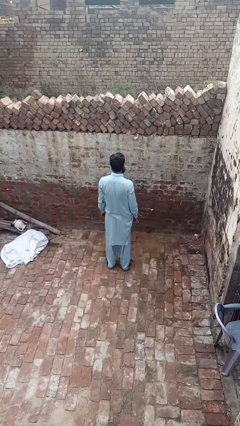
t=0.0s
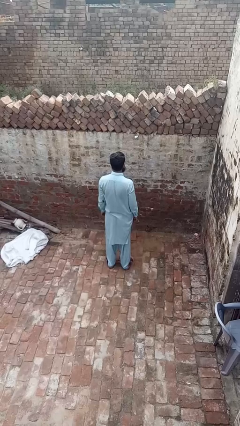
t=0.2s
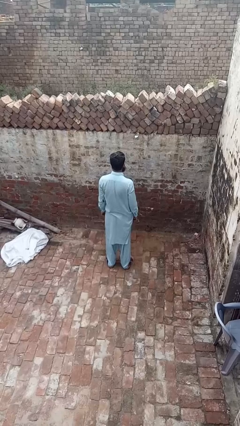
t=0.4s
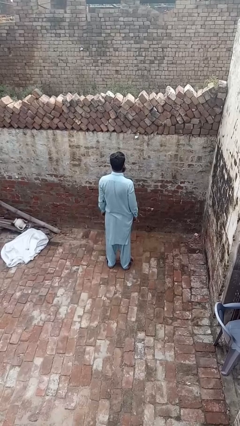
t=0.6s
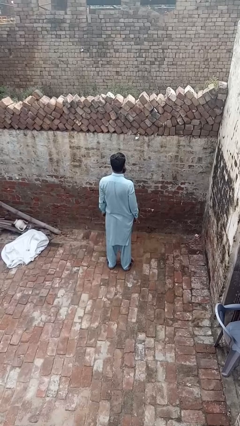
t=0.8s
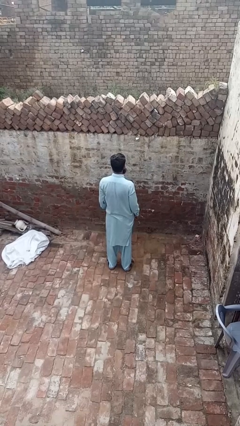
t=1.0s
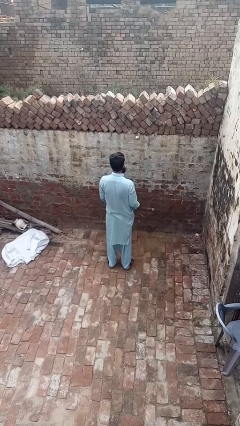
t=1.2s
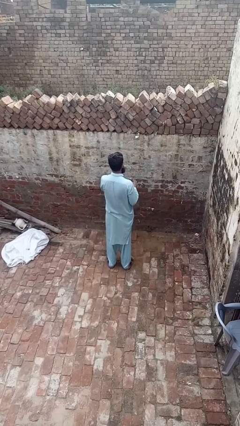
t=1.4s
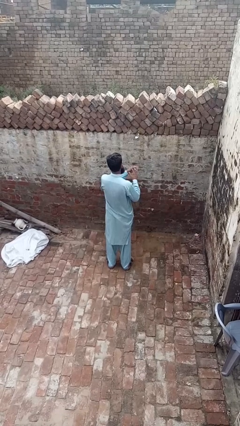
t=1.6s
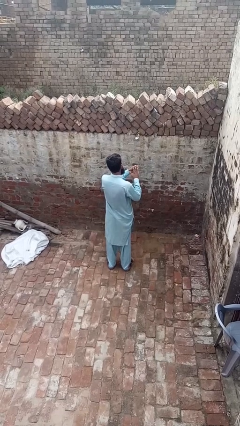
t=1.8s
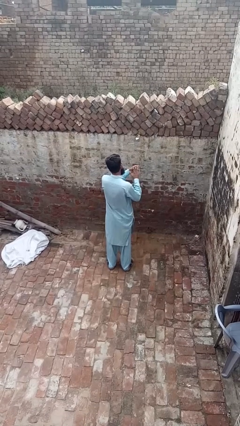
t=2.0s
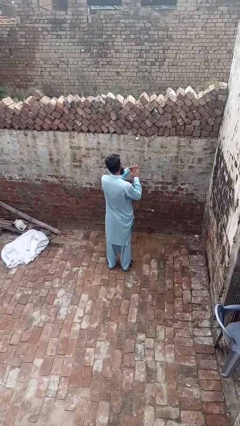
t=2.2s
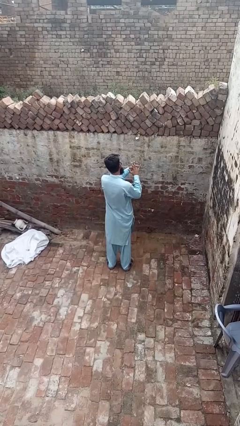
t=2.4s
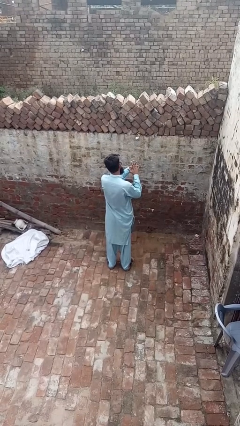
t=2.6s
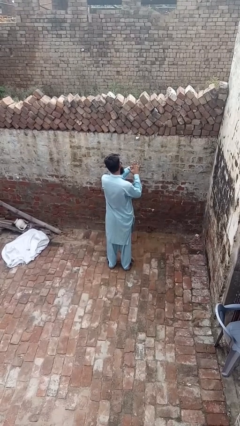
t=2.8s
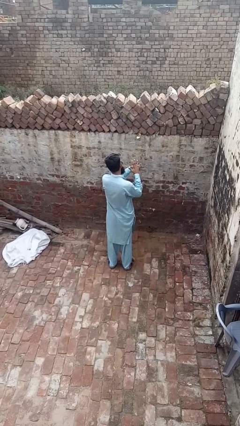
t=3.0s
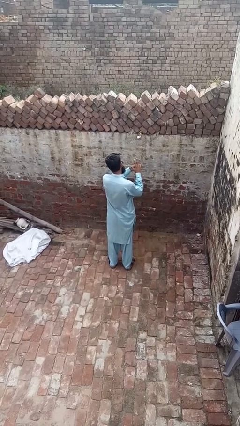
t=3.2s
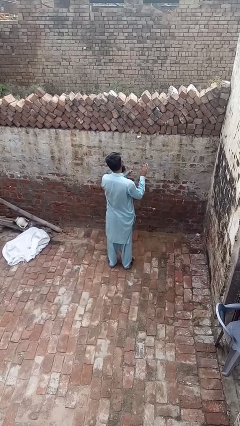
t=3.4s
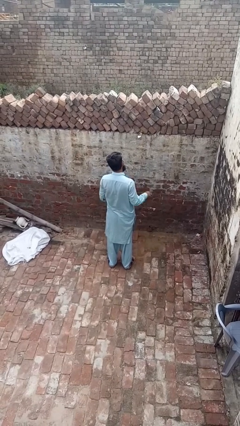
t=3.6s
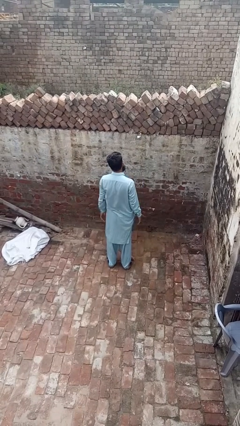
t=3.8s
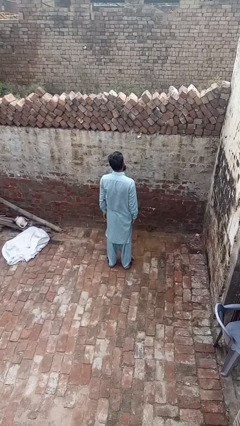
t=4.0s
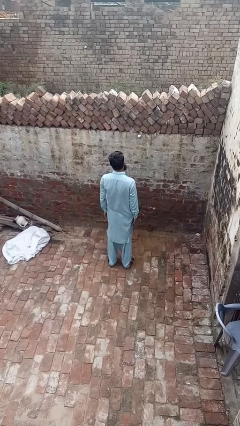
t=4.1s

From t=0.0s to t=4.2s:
person puts on ring

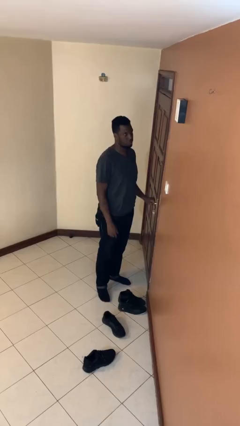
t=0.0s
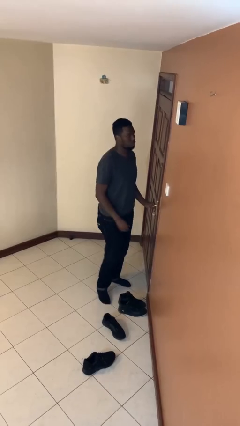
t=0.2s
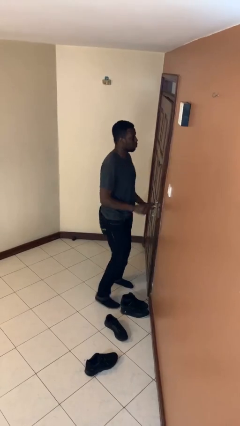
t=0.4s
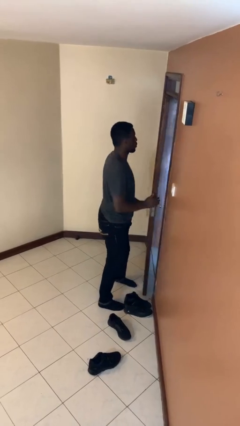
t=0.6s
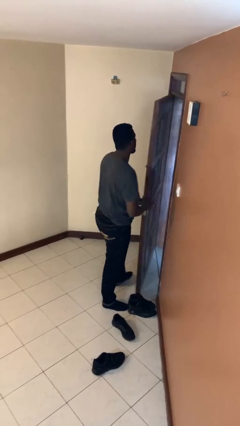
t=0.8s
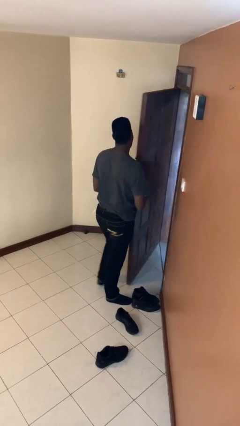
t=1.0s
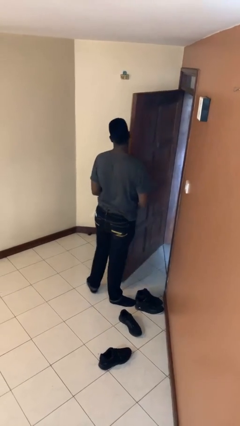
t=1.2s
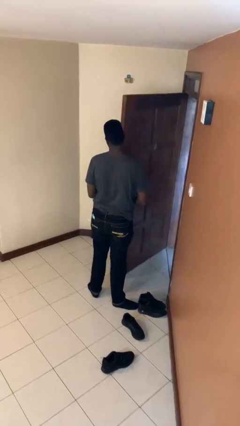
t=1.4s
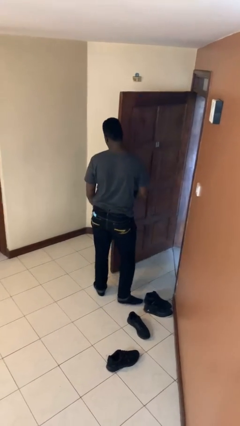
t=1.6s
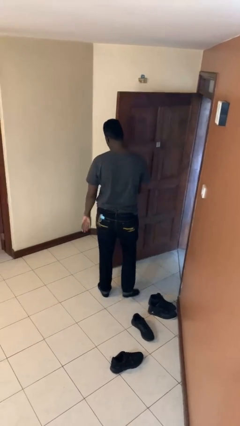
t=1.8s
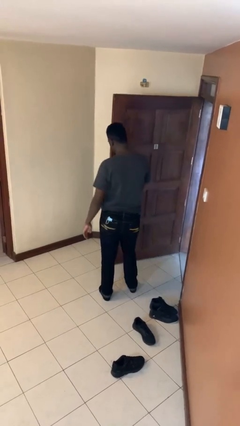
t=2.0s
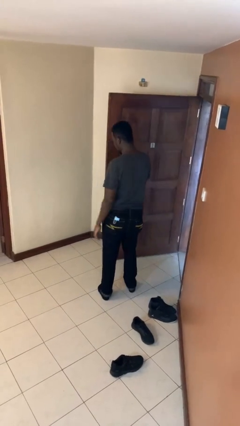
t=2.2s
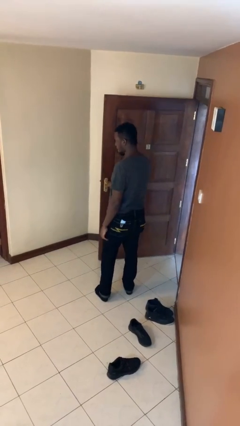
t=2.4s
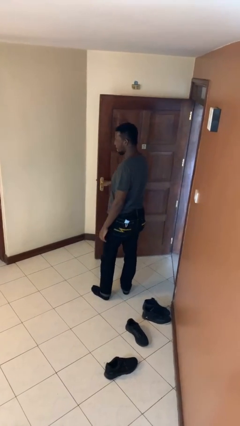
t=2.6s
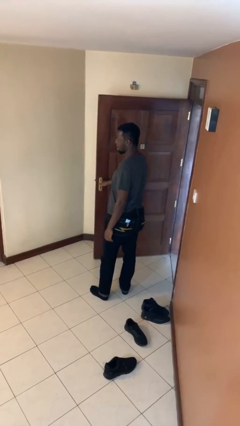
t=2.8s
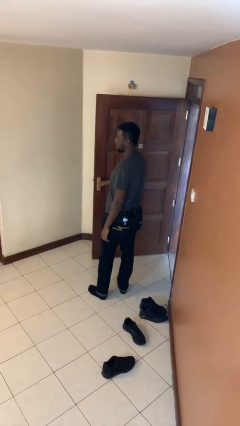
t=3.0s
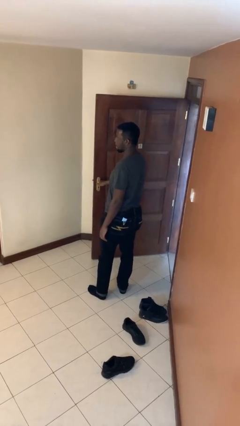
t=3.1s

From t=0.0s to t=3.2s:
person opens facility door

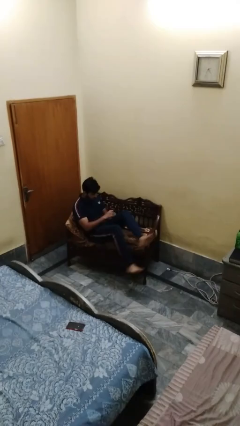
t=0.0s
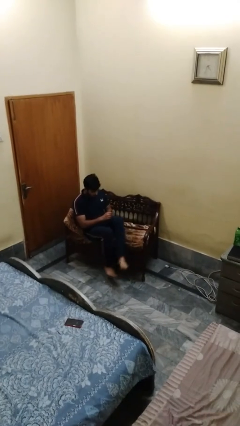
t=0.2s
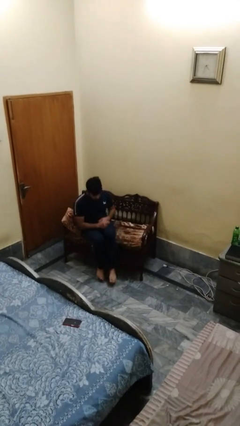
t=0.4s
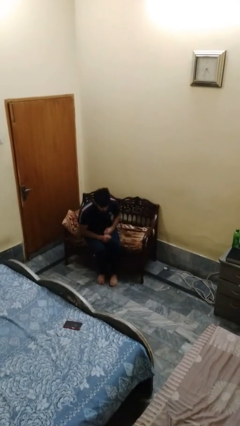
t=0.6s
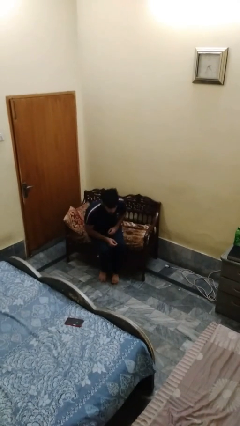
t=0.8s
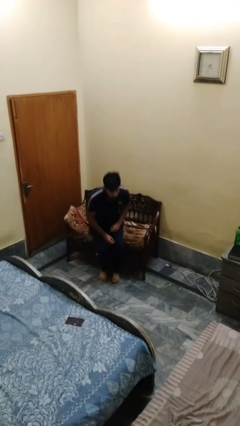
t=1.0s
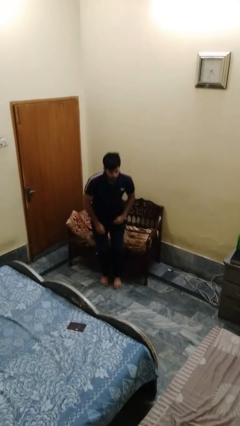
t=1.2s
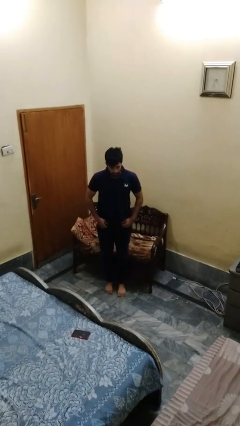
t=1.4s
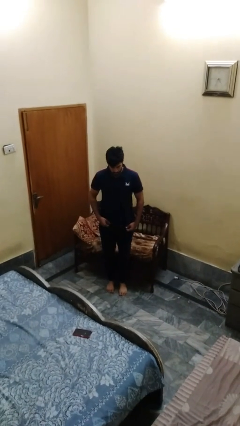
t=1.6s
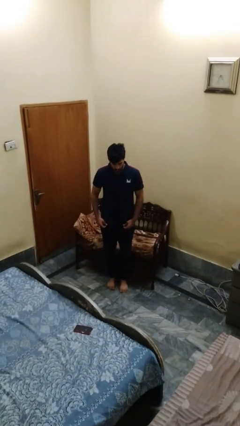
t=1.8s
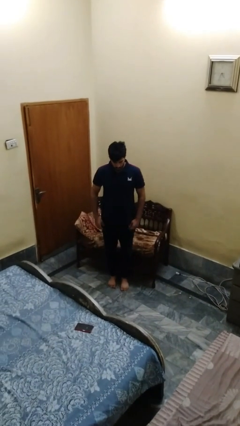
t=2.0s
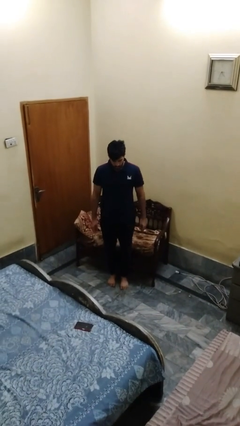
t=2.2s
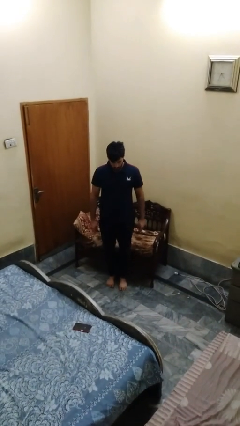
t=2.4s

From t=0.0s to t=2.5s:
person stands up

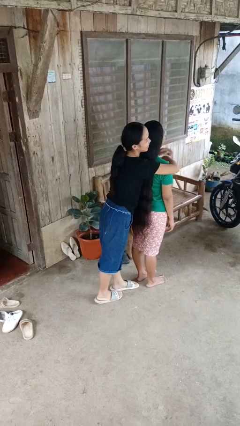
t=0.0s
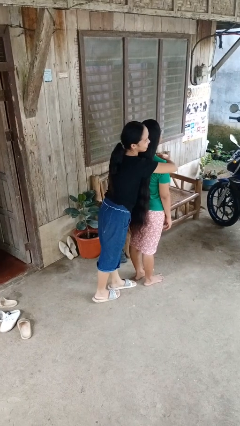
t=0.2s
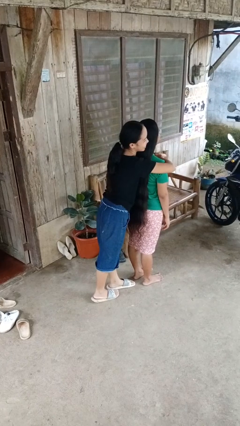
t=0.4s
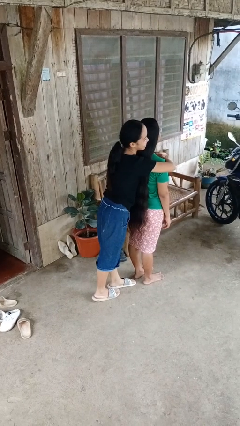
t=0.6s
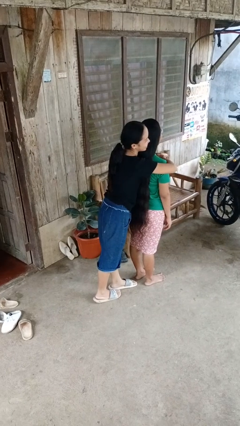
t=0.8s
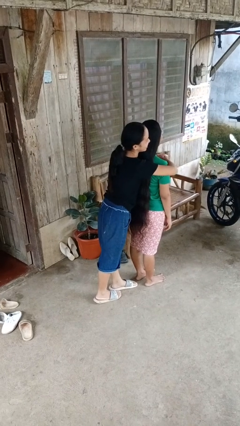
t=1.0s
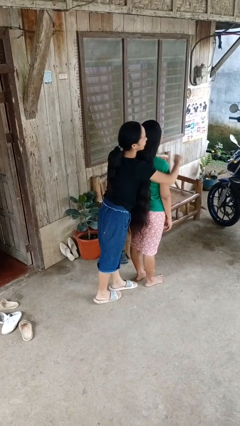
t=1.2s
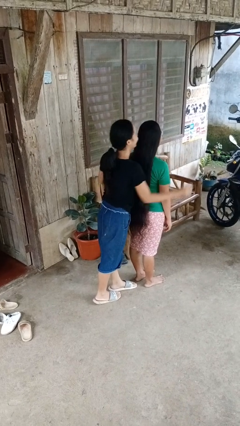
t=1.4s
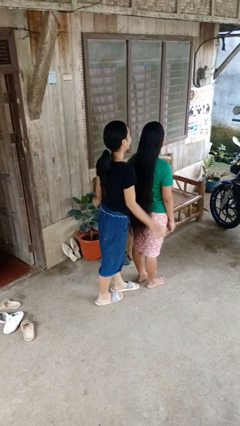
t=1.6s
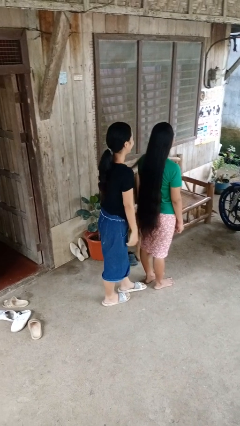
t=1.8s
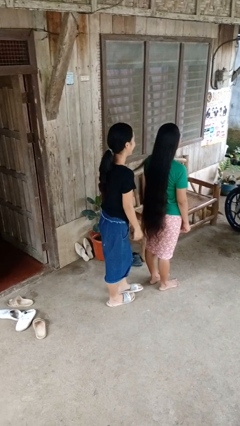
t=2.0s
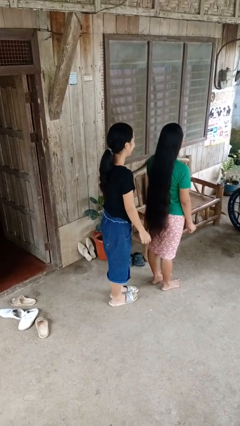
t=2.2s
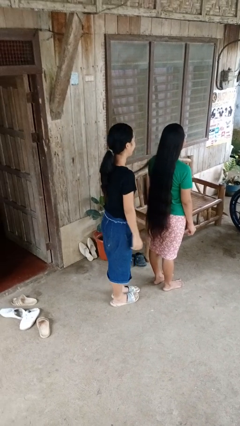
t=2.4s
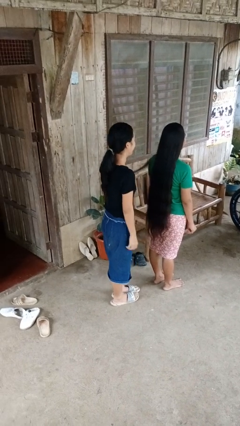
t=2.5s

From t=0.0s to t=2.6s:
person hugs person from behind

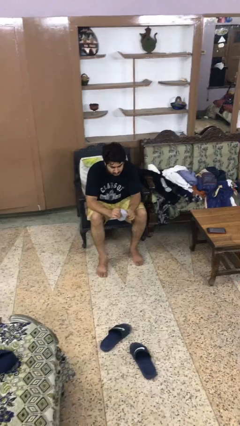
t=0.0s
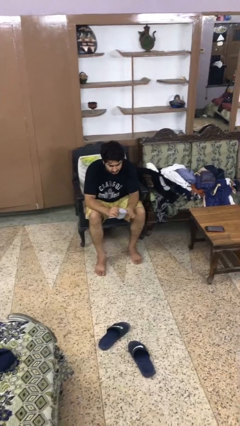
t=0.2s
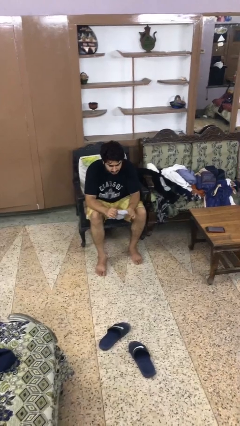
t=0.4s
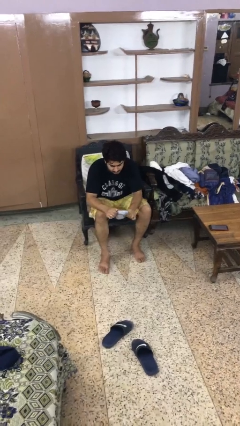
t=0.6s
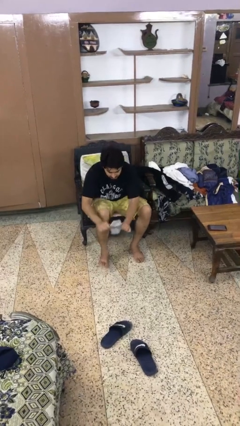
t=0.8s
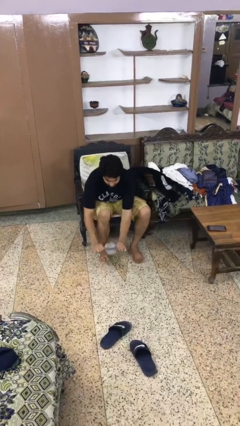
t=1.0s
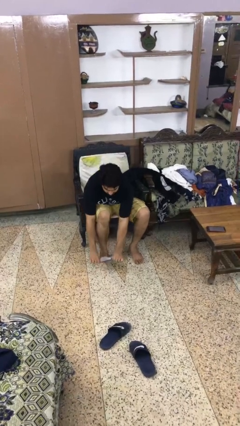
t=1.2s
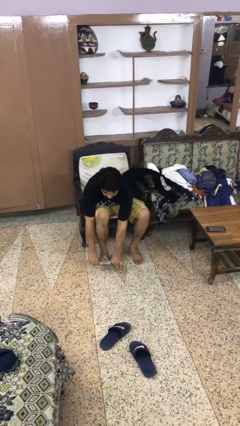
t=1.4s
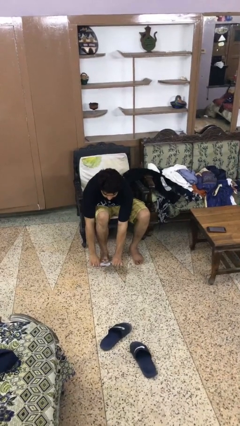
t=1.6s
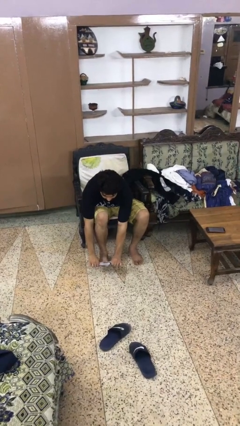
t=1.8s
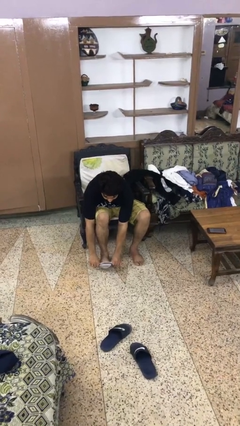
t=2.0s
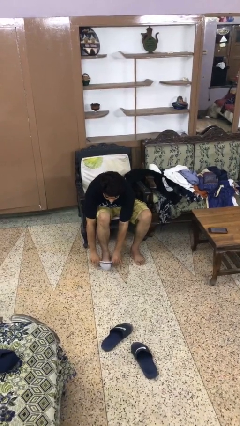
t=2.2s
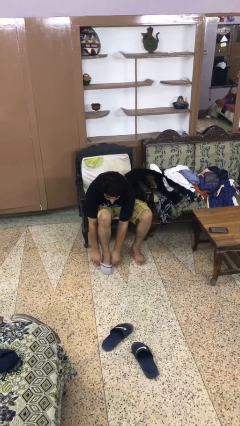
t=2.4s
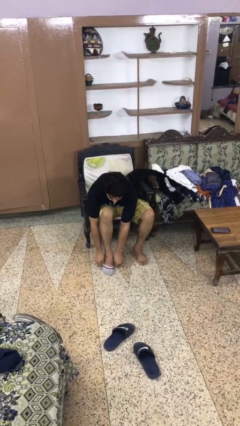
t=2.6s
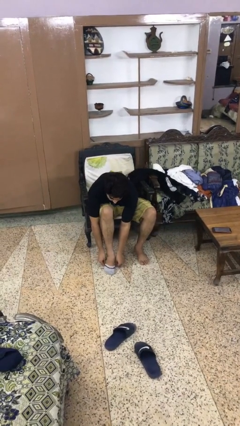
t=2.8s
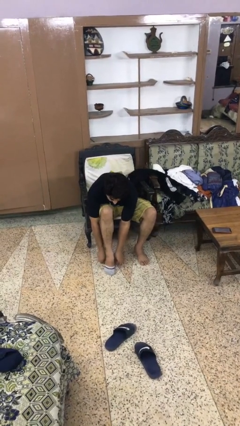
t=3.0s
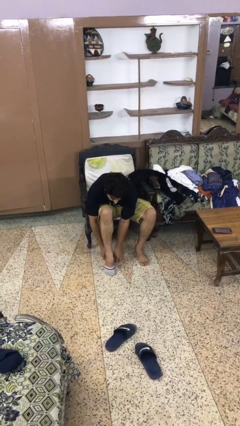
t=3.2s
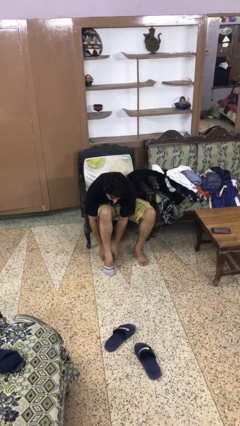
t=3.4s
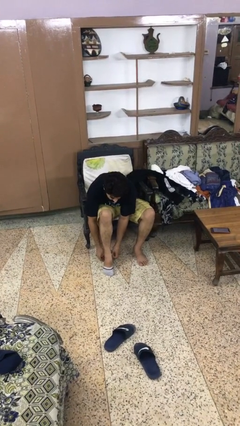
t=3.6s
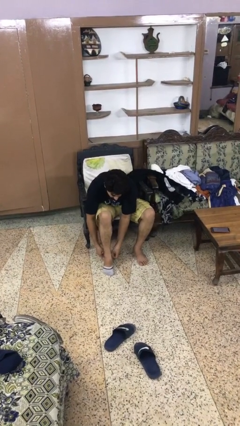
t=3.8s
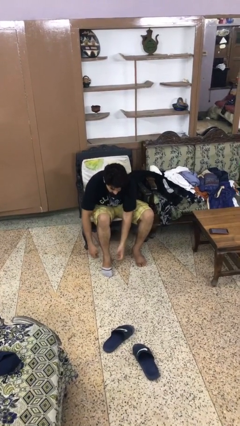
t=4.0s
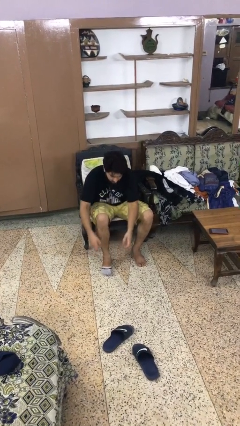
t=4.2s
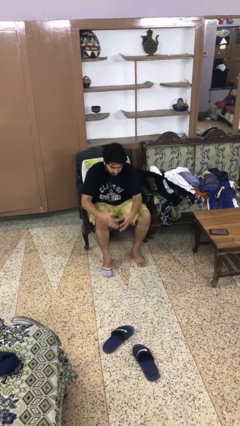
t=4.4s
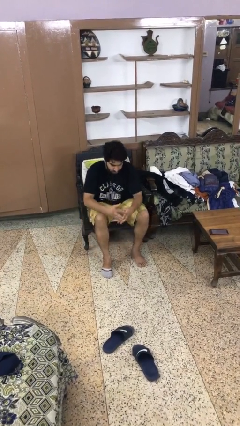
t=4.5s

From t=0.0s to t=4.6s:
person puts on socks
